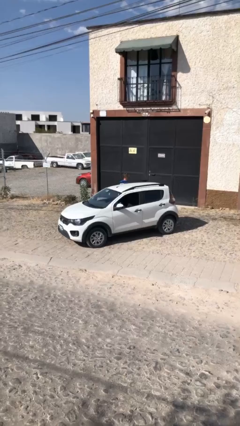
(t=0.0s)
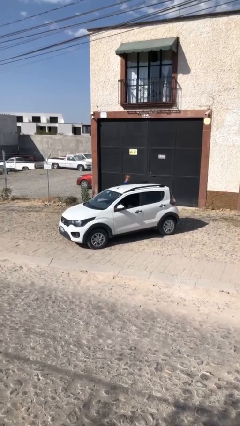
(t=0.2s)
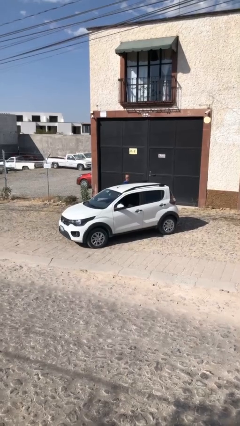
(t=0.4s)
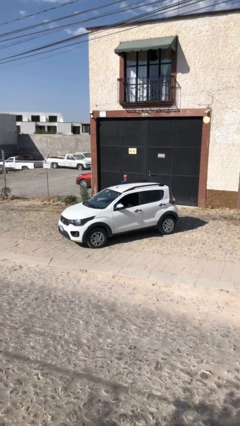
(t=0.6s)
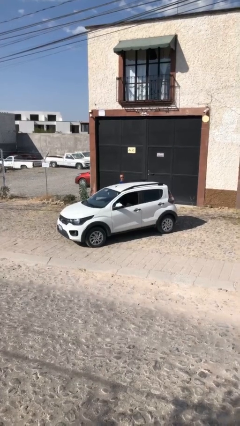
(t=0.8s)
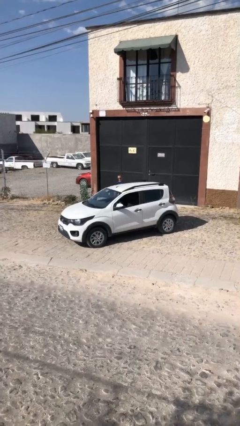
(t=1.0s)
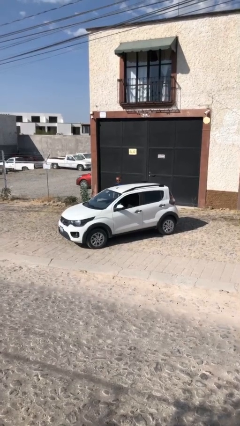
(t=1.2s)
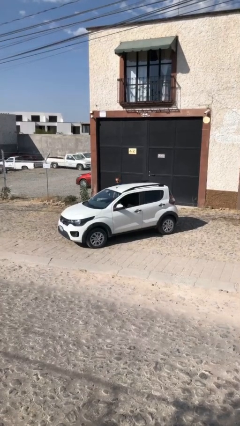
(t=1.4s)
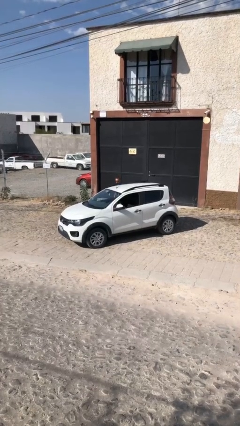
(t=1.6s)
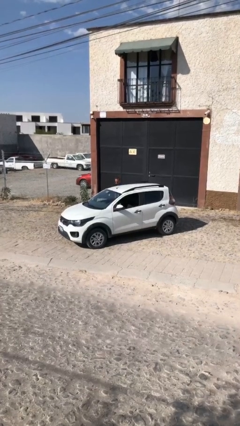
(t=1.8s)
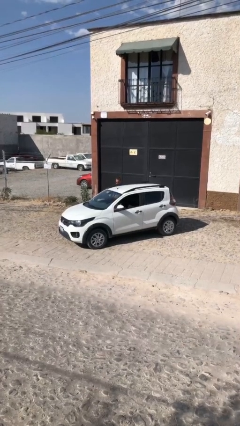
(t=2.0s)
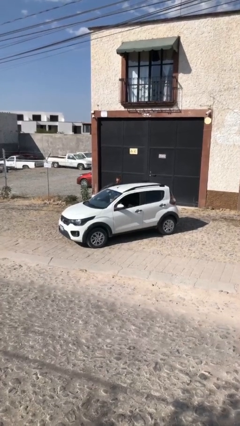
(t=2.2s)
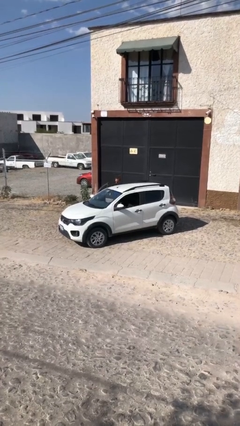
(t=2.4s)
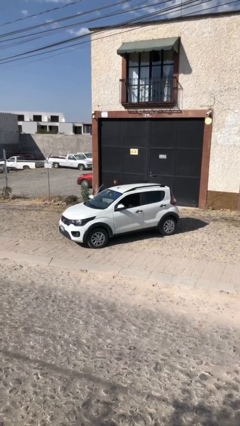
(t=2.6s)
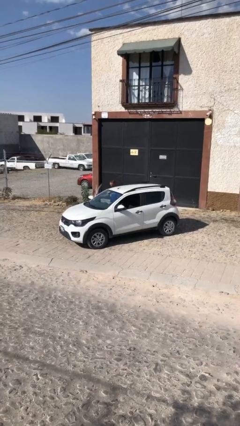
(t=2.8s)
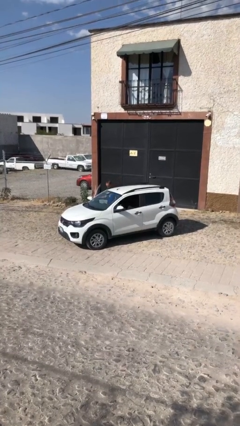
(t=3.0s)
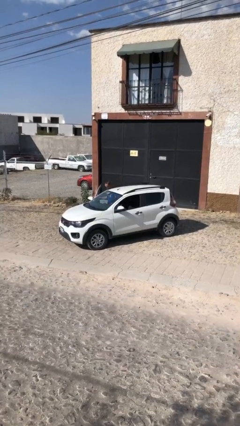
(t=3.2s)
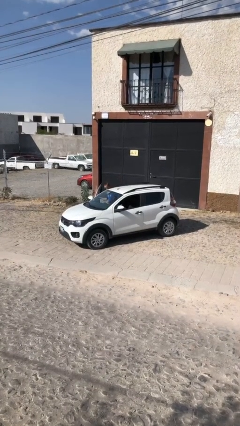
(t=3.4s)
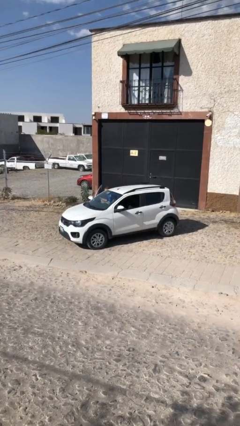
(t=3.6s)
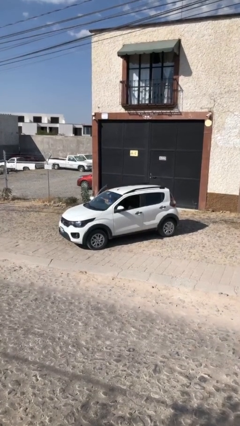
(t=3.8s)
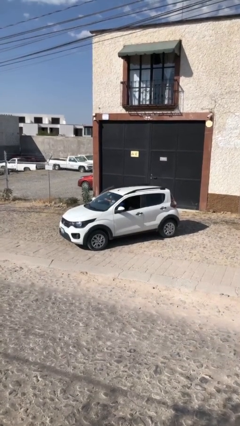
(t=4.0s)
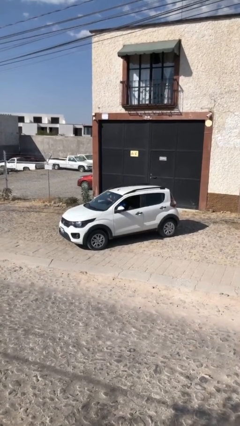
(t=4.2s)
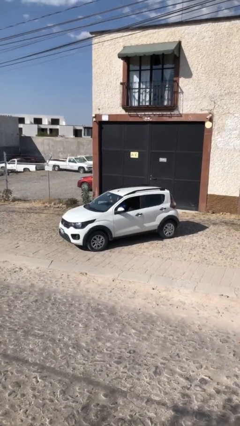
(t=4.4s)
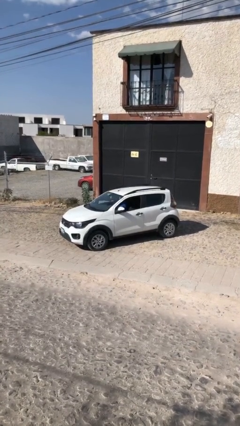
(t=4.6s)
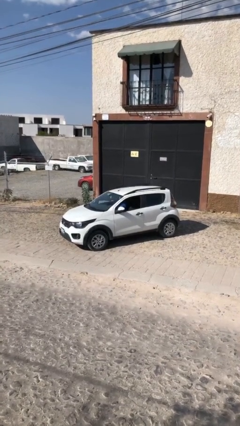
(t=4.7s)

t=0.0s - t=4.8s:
car picks up person

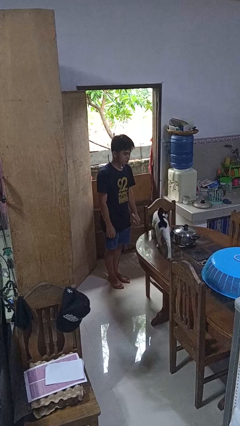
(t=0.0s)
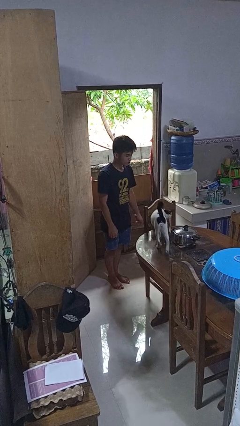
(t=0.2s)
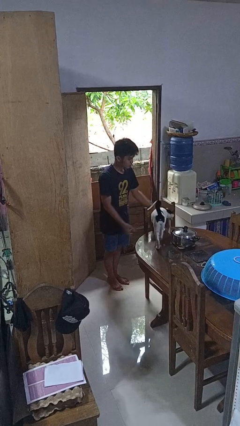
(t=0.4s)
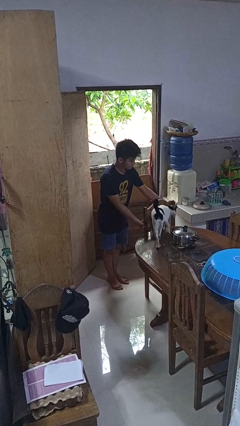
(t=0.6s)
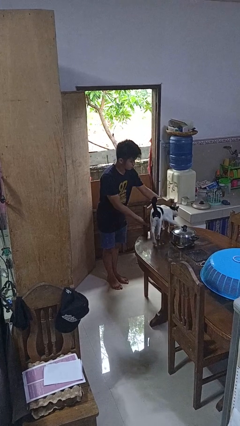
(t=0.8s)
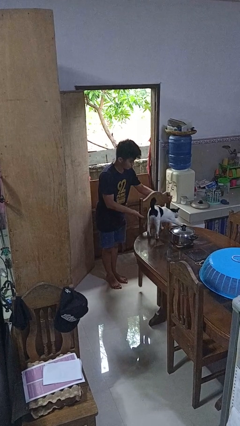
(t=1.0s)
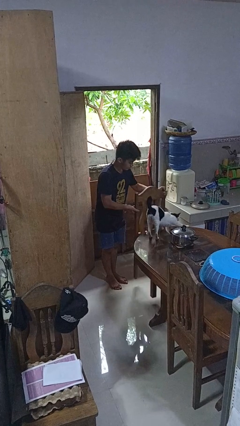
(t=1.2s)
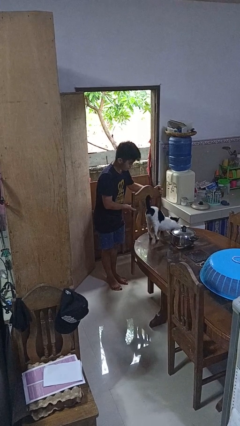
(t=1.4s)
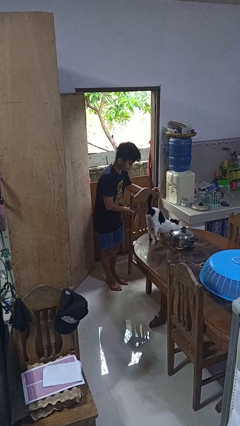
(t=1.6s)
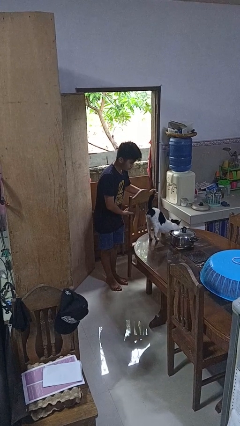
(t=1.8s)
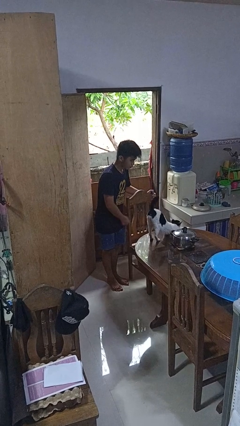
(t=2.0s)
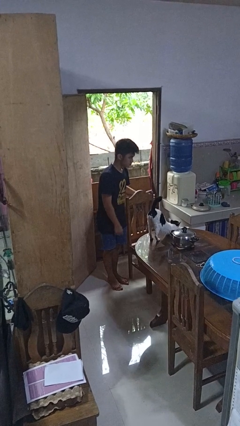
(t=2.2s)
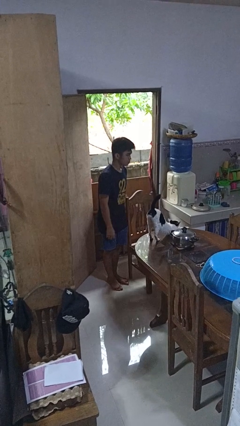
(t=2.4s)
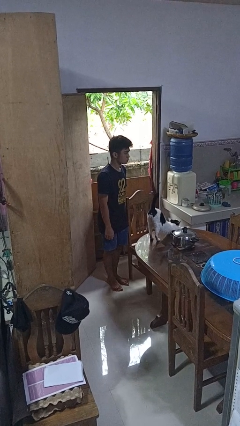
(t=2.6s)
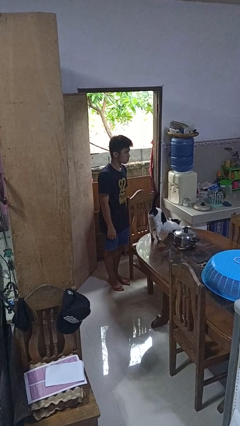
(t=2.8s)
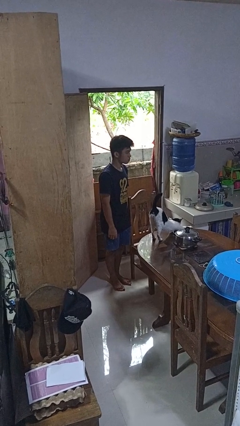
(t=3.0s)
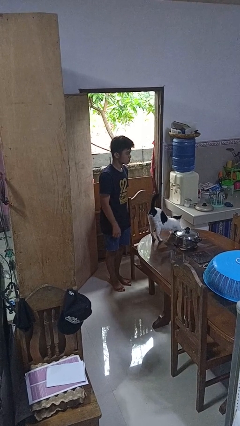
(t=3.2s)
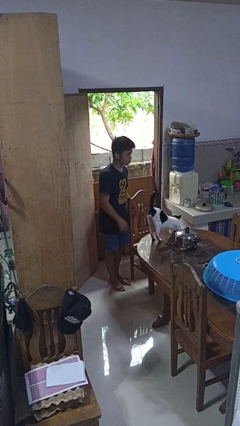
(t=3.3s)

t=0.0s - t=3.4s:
person pulls out chair

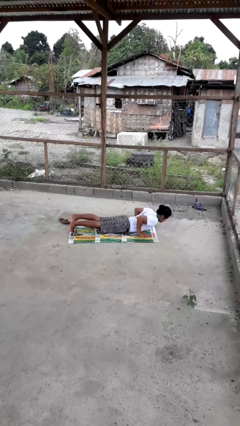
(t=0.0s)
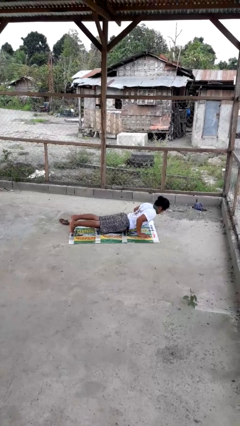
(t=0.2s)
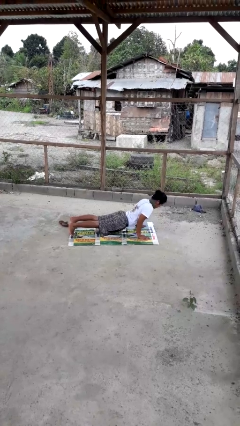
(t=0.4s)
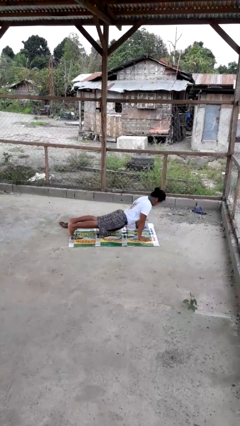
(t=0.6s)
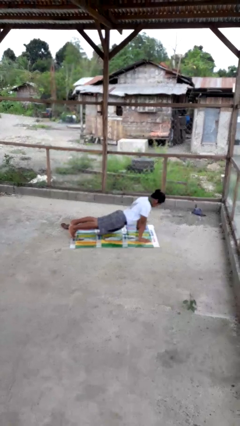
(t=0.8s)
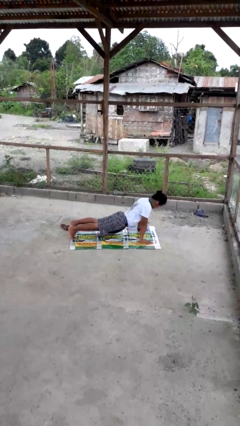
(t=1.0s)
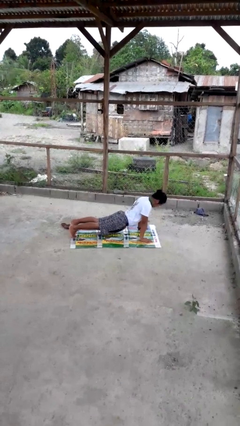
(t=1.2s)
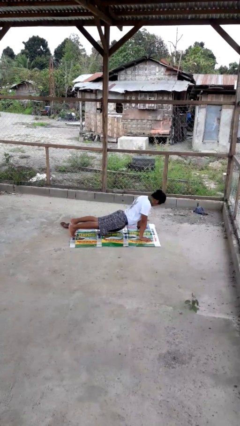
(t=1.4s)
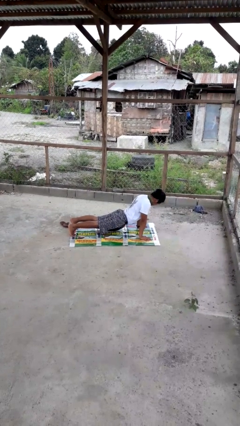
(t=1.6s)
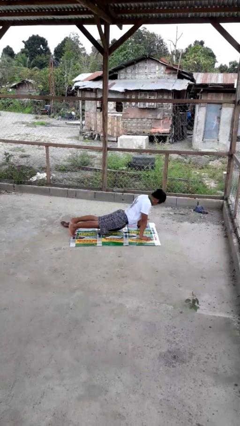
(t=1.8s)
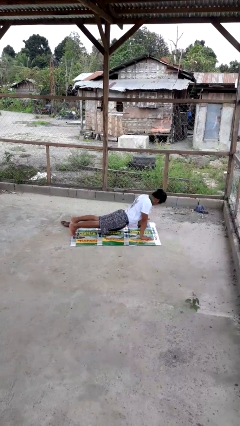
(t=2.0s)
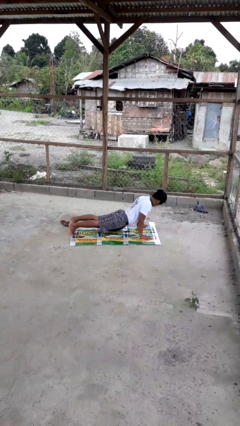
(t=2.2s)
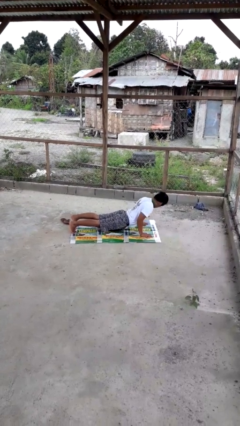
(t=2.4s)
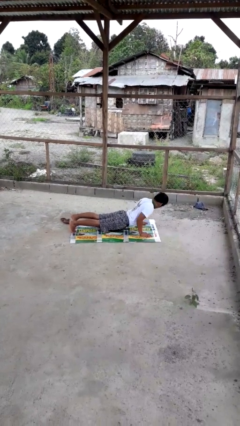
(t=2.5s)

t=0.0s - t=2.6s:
person exercises with pushup

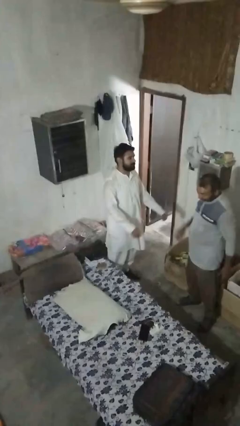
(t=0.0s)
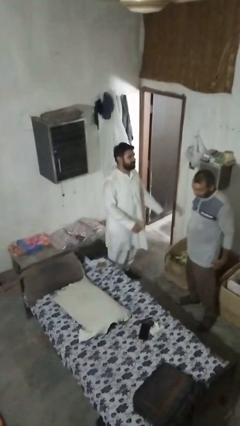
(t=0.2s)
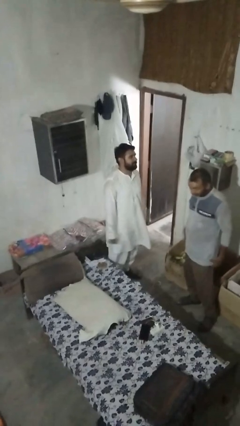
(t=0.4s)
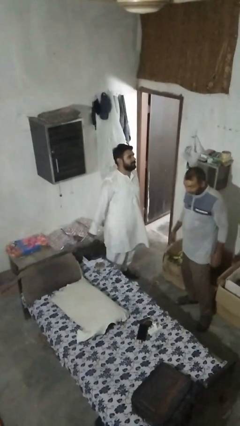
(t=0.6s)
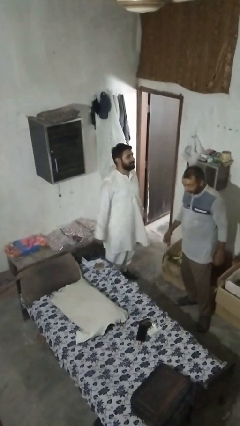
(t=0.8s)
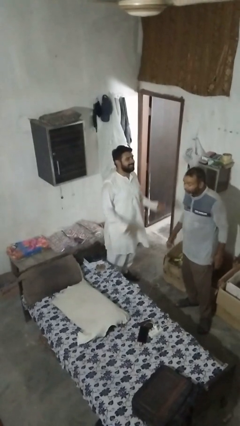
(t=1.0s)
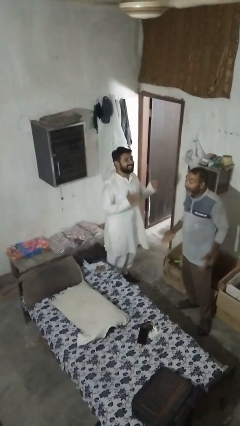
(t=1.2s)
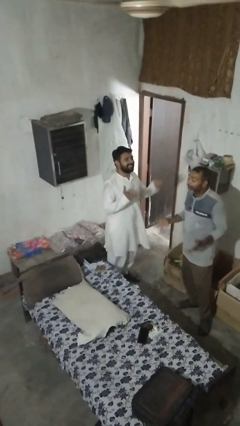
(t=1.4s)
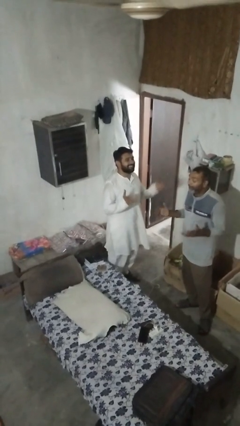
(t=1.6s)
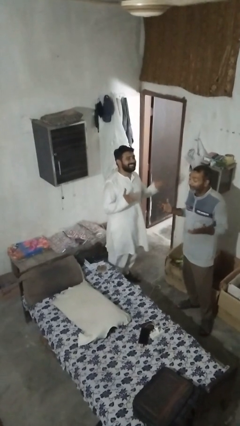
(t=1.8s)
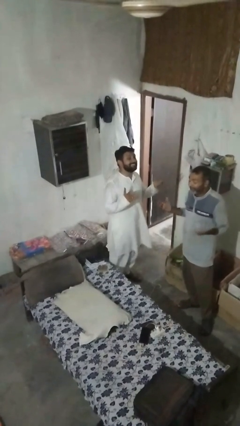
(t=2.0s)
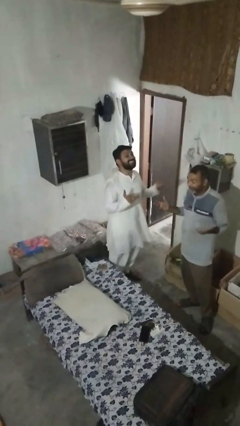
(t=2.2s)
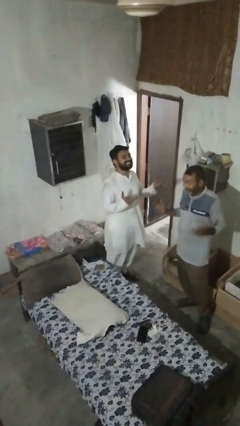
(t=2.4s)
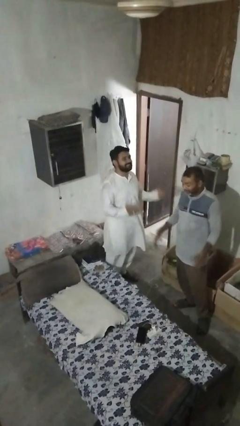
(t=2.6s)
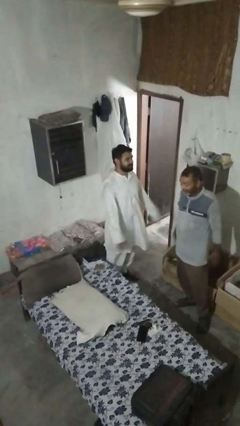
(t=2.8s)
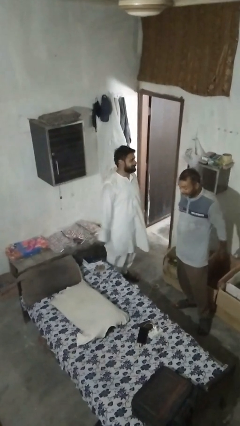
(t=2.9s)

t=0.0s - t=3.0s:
person laughs with person

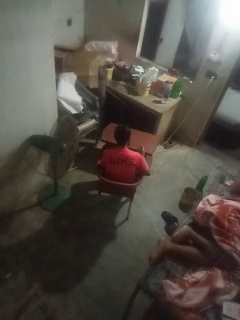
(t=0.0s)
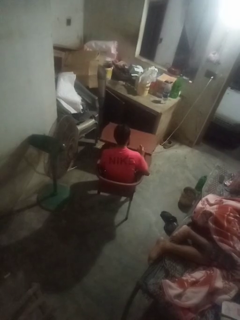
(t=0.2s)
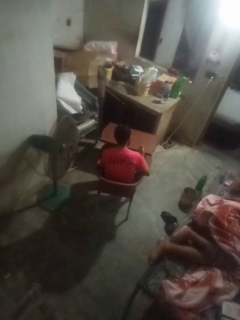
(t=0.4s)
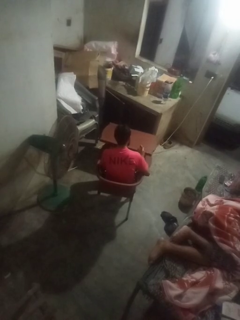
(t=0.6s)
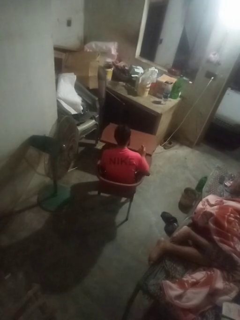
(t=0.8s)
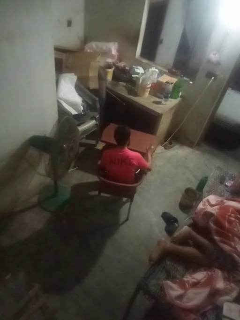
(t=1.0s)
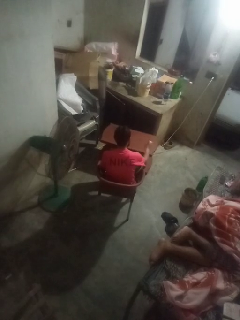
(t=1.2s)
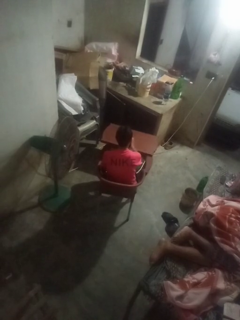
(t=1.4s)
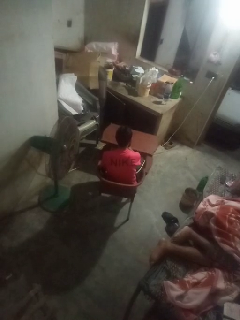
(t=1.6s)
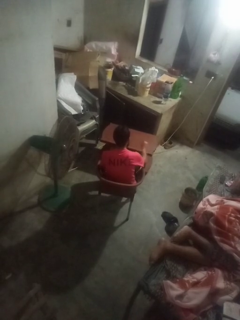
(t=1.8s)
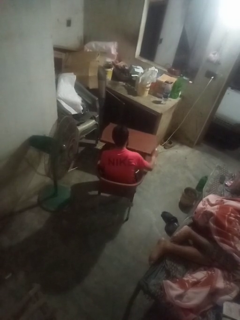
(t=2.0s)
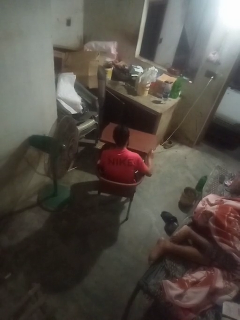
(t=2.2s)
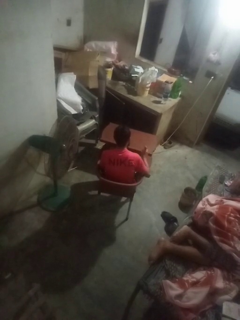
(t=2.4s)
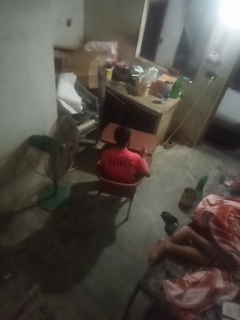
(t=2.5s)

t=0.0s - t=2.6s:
person sprays from bottle

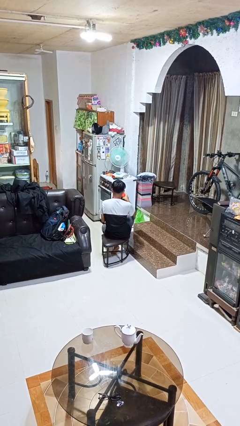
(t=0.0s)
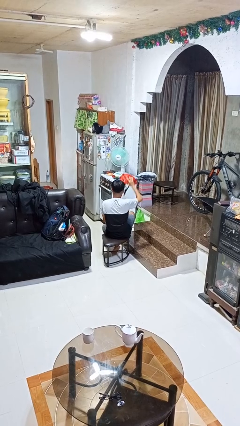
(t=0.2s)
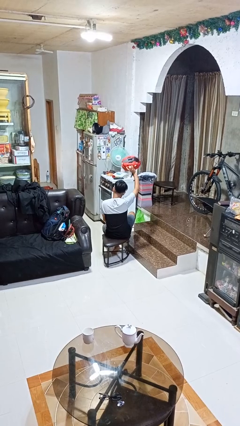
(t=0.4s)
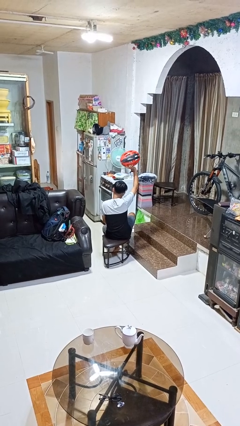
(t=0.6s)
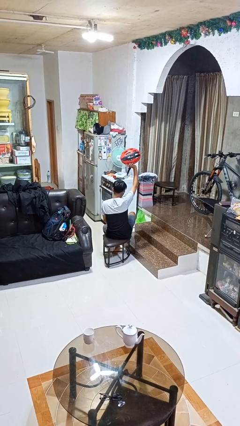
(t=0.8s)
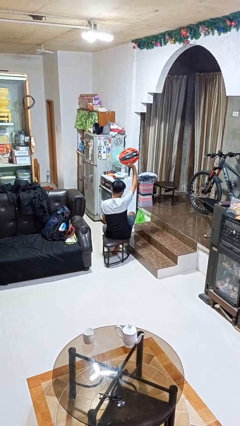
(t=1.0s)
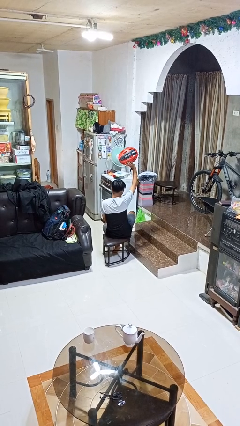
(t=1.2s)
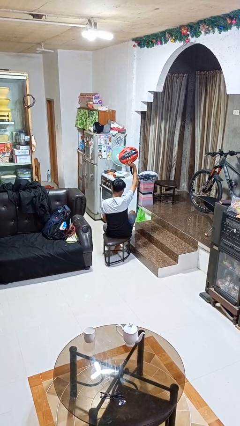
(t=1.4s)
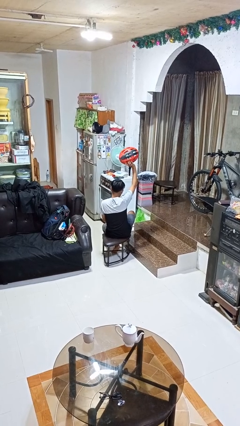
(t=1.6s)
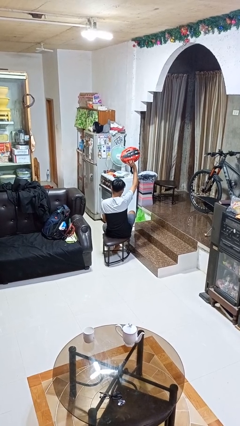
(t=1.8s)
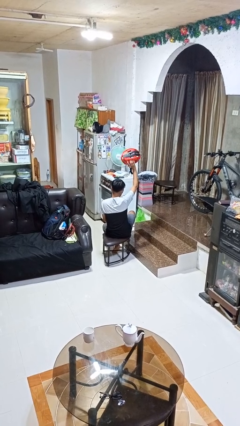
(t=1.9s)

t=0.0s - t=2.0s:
person holds object above head
